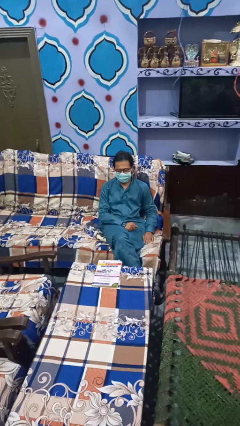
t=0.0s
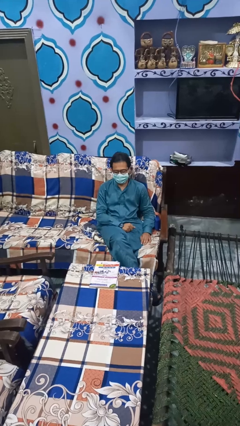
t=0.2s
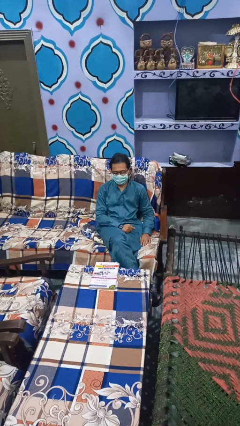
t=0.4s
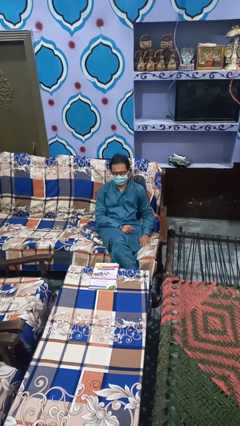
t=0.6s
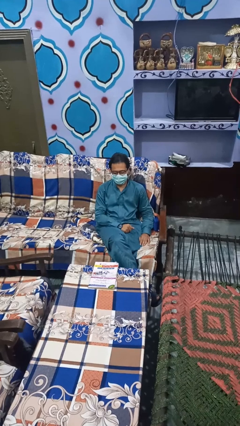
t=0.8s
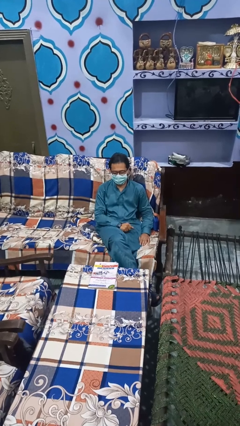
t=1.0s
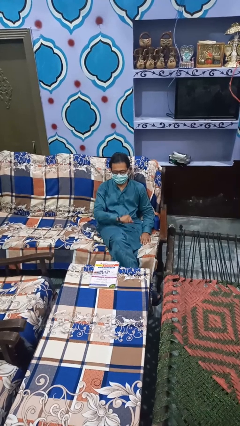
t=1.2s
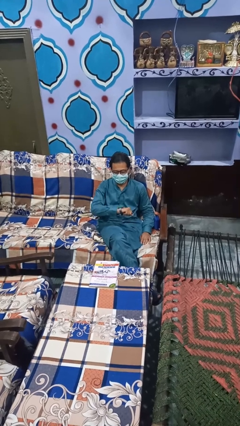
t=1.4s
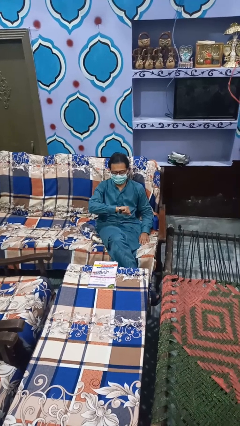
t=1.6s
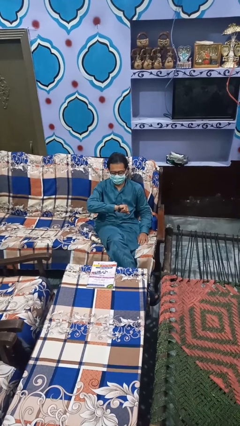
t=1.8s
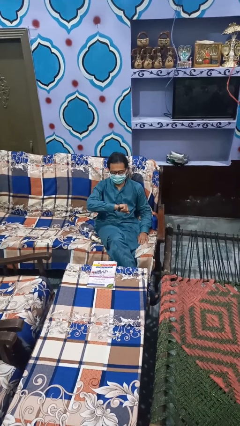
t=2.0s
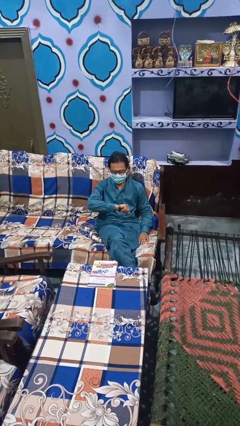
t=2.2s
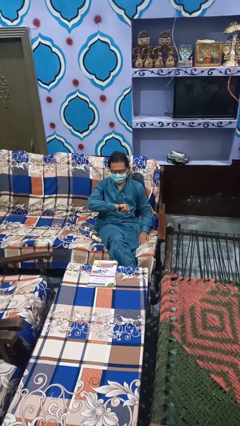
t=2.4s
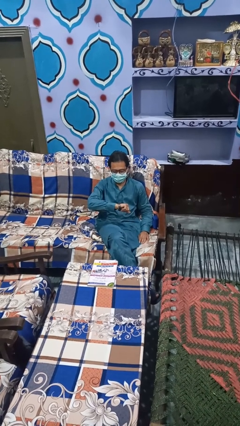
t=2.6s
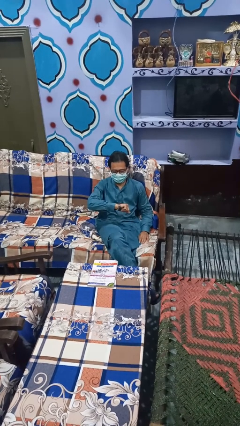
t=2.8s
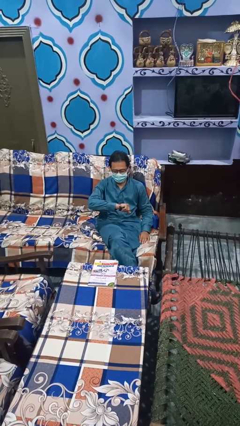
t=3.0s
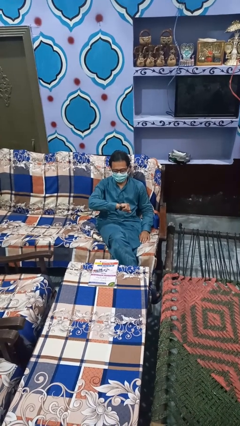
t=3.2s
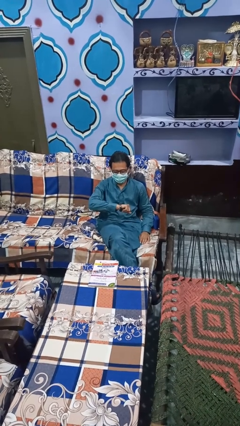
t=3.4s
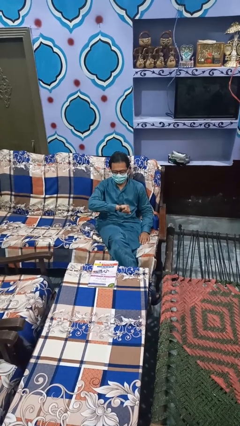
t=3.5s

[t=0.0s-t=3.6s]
person looks at wristwatch

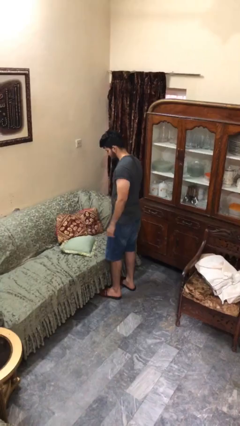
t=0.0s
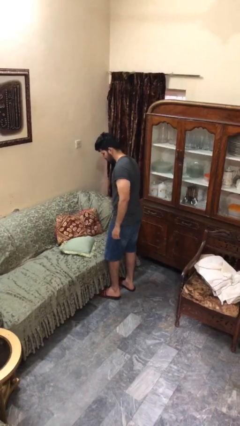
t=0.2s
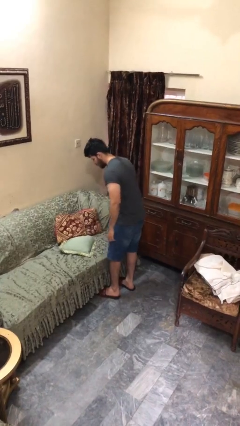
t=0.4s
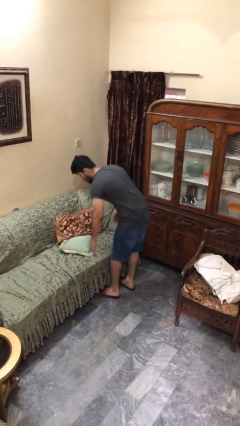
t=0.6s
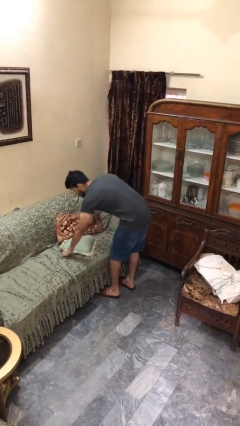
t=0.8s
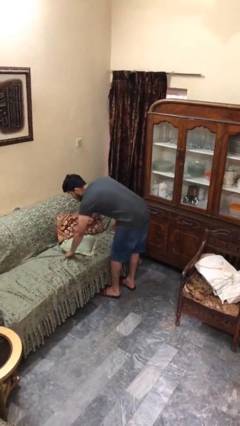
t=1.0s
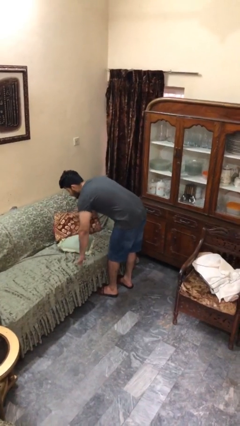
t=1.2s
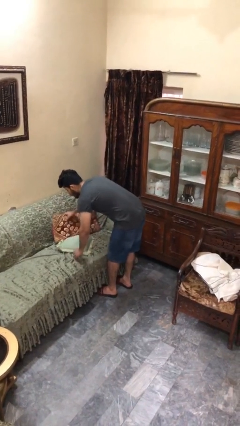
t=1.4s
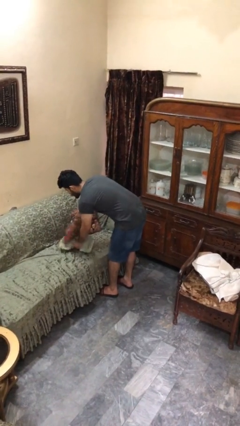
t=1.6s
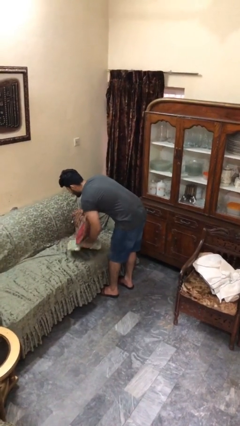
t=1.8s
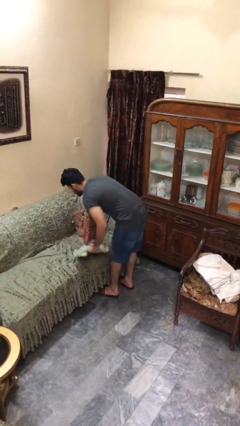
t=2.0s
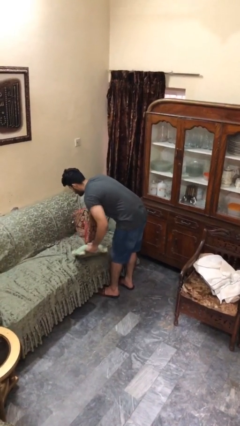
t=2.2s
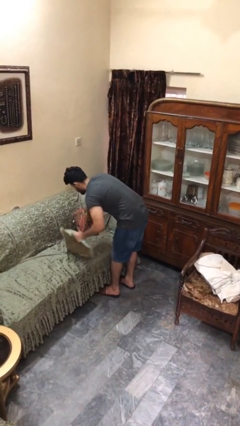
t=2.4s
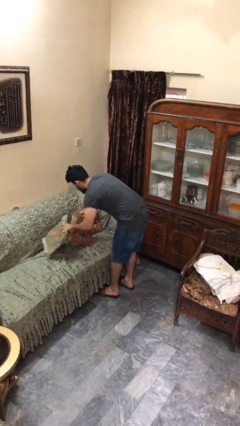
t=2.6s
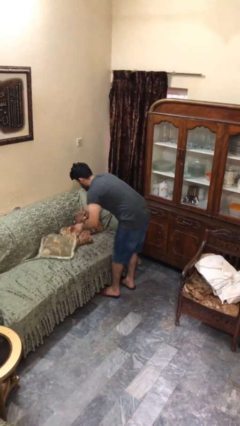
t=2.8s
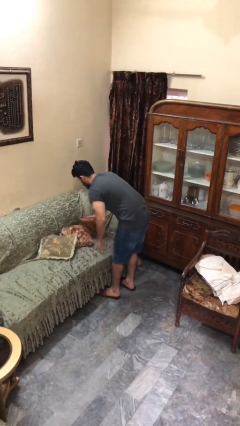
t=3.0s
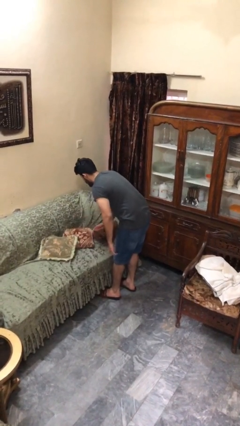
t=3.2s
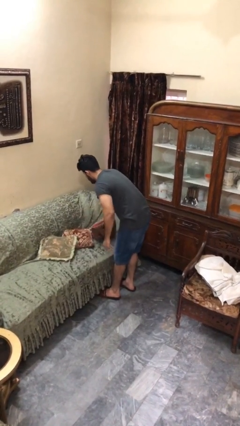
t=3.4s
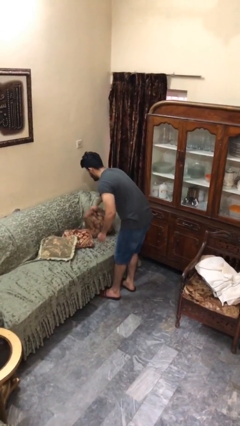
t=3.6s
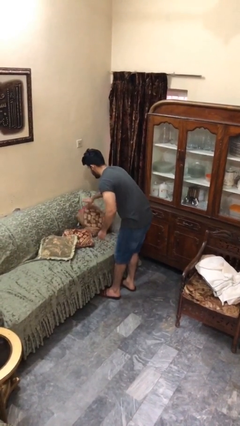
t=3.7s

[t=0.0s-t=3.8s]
person searches in couch

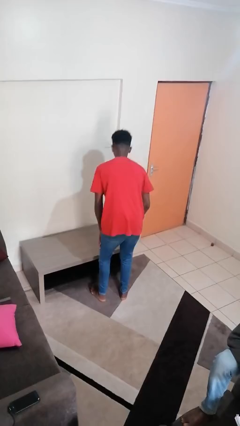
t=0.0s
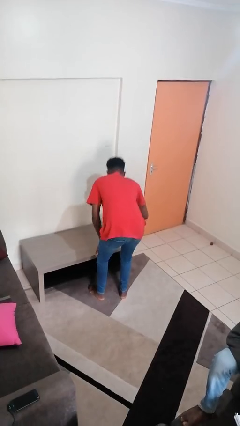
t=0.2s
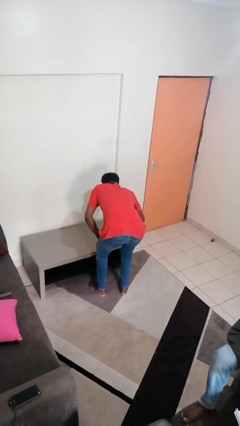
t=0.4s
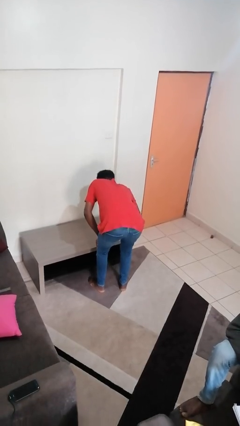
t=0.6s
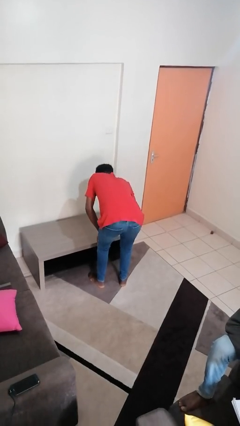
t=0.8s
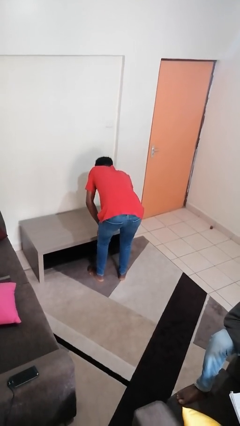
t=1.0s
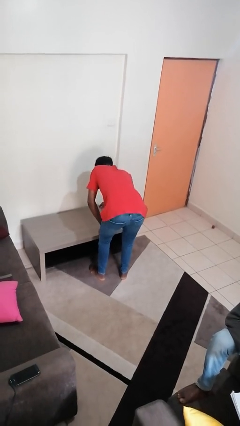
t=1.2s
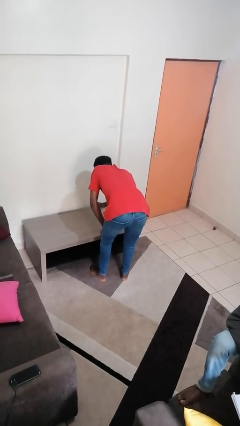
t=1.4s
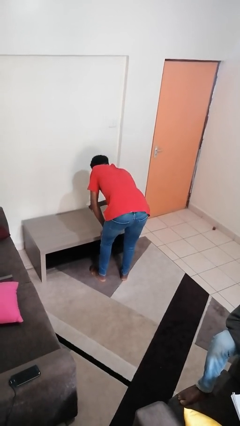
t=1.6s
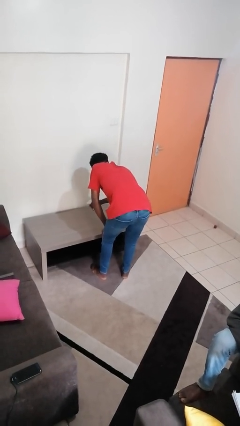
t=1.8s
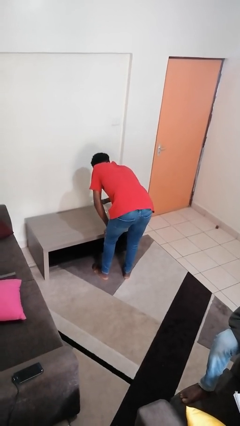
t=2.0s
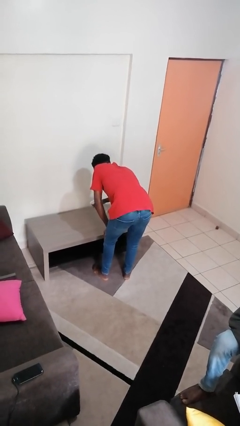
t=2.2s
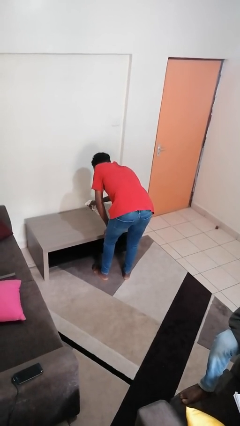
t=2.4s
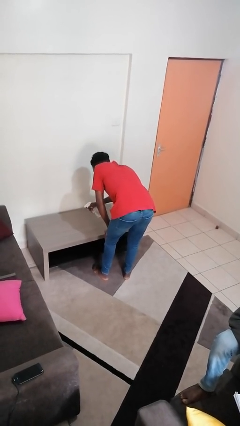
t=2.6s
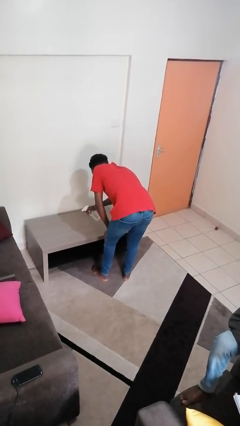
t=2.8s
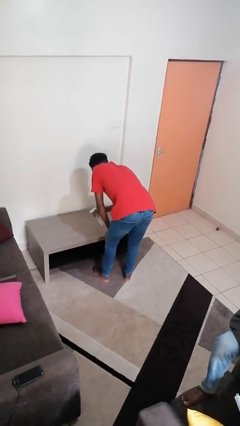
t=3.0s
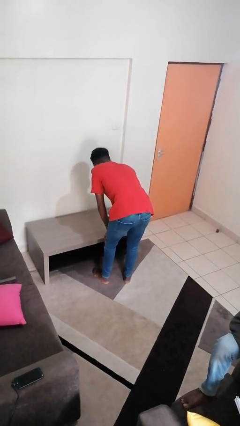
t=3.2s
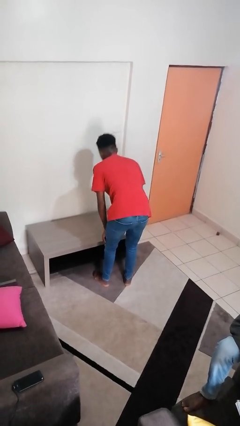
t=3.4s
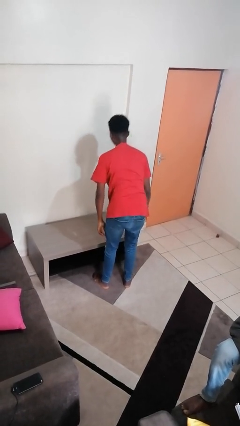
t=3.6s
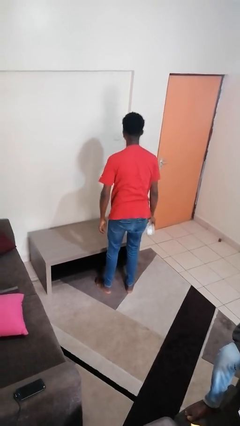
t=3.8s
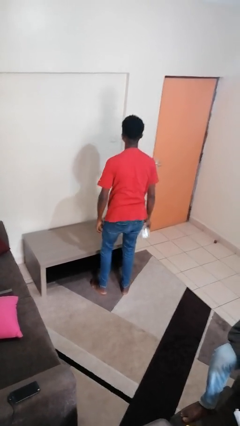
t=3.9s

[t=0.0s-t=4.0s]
person sprays from bottle

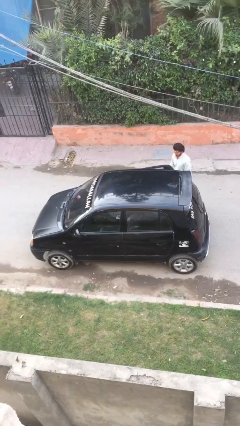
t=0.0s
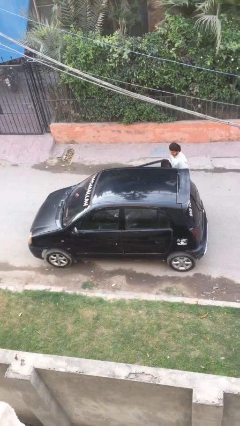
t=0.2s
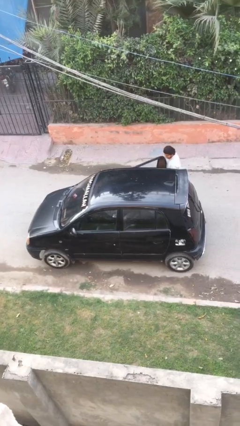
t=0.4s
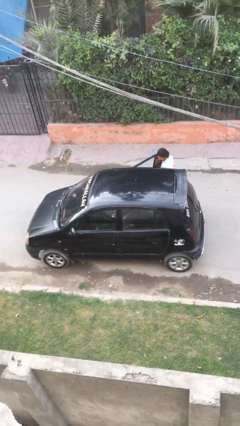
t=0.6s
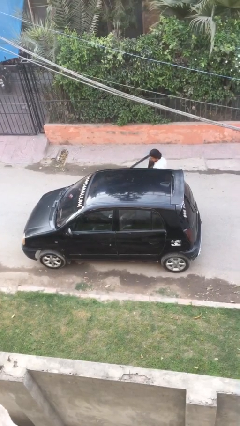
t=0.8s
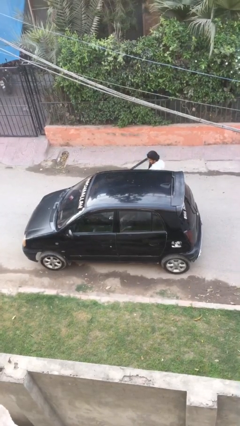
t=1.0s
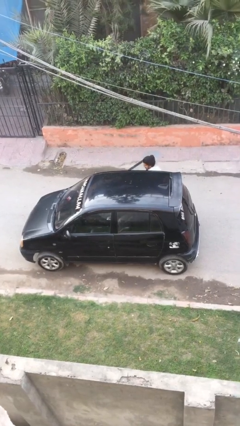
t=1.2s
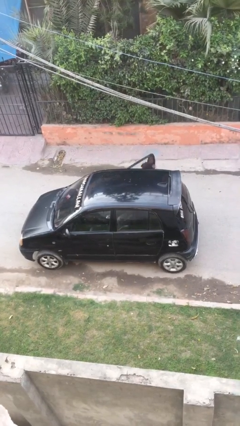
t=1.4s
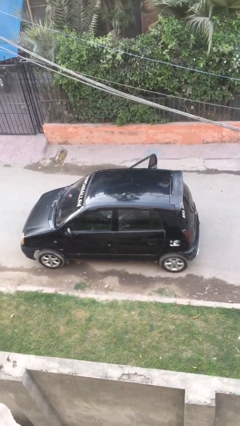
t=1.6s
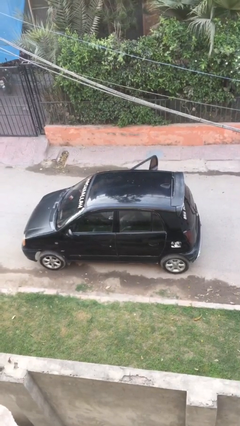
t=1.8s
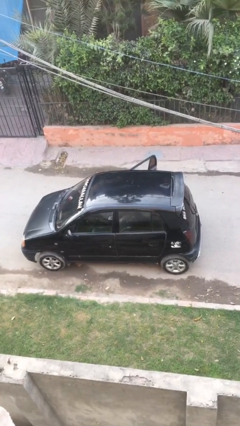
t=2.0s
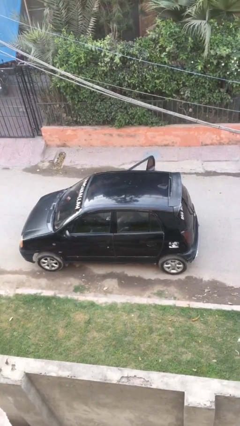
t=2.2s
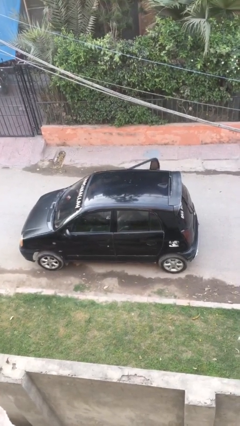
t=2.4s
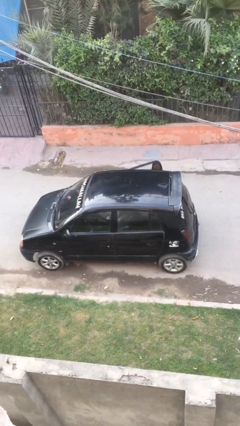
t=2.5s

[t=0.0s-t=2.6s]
car picks up person

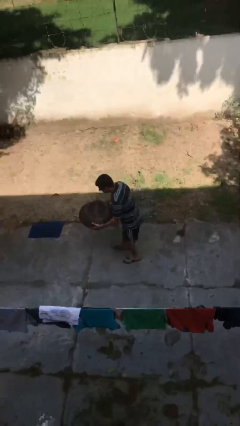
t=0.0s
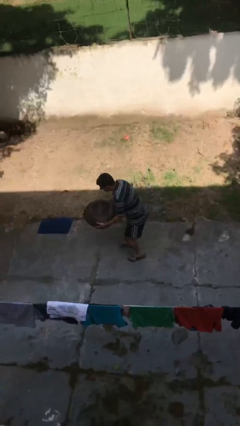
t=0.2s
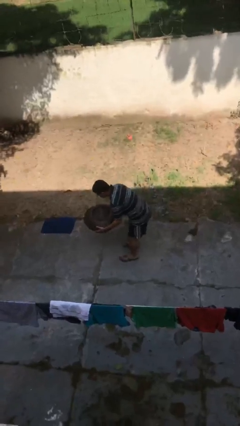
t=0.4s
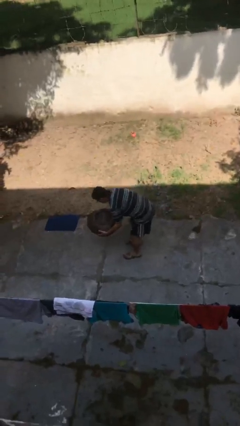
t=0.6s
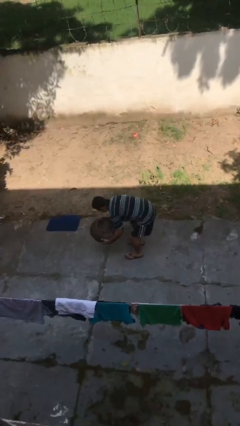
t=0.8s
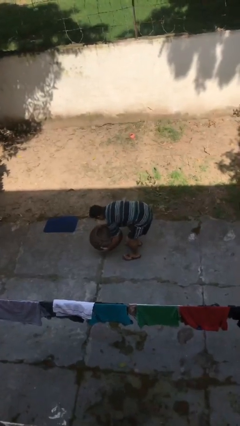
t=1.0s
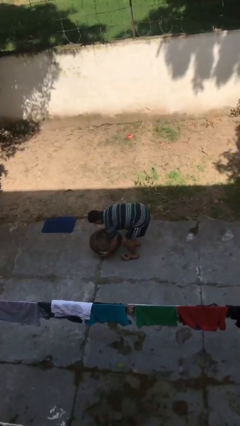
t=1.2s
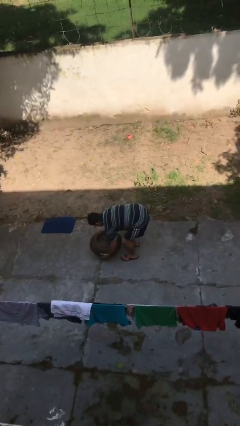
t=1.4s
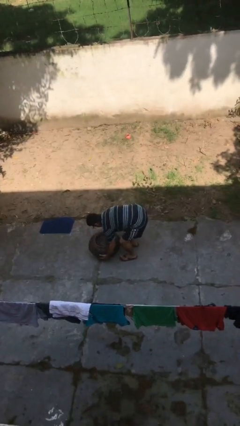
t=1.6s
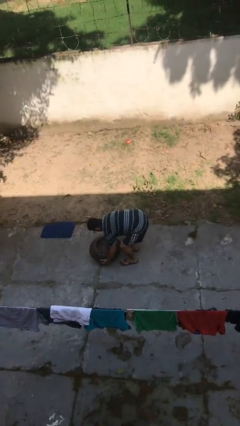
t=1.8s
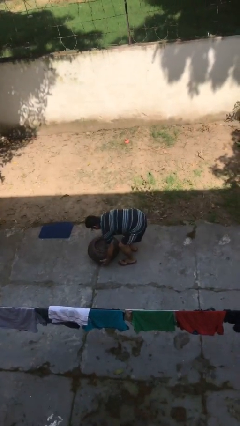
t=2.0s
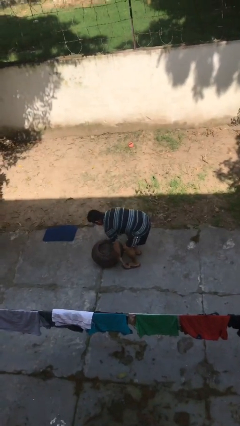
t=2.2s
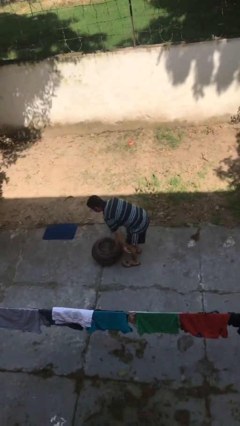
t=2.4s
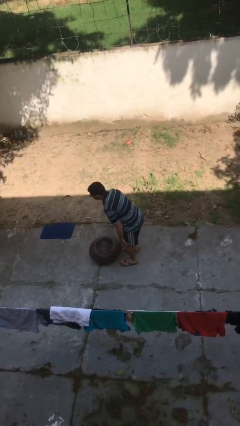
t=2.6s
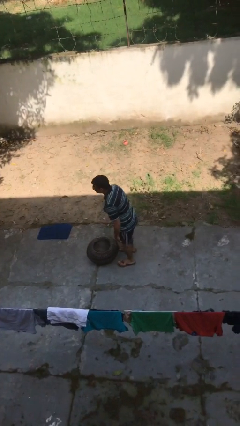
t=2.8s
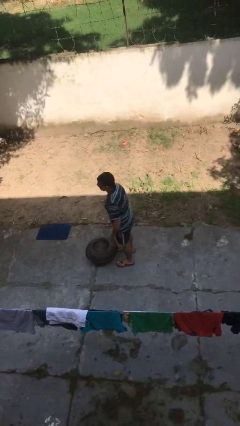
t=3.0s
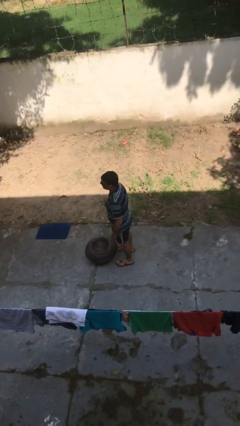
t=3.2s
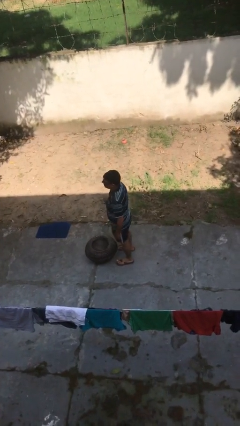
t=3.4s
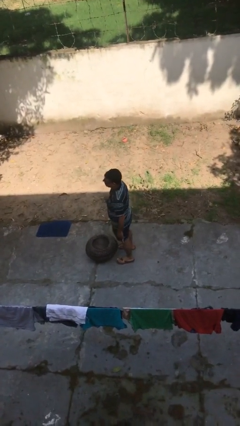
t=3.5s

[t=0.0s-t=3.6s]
person puts down object on floor

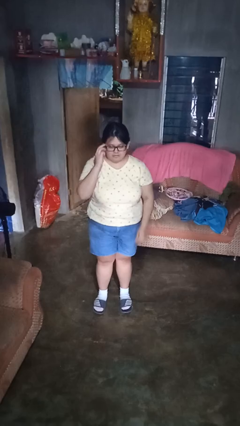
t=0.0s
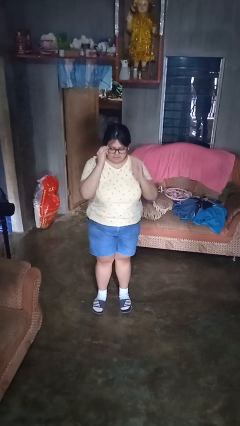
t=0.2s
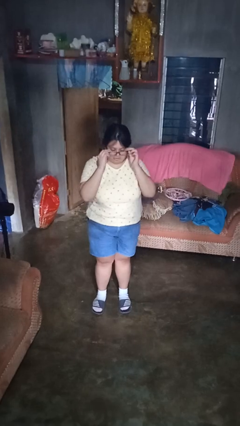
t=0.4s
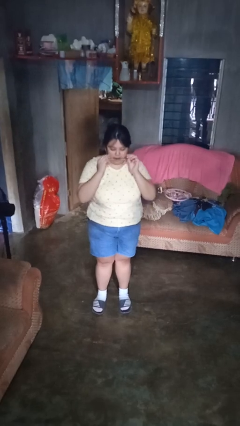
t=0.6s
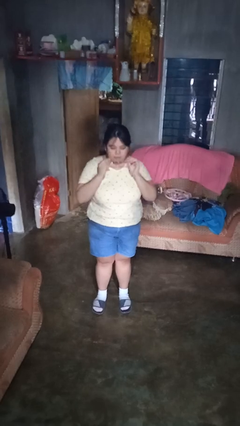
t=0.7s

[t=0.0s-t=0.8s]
person takes off glasses
